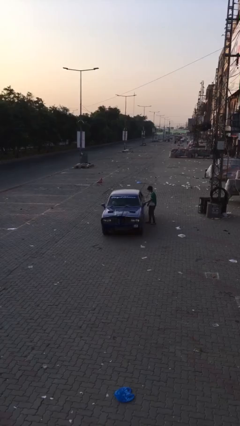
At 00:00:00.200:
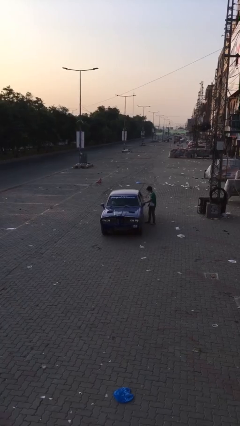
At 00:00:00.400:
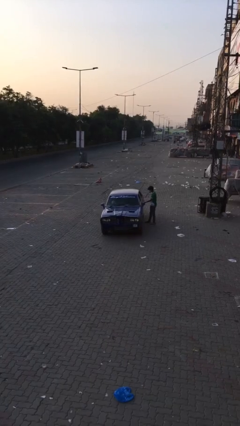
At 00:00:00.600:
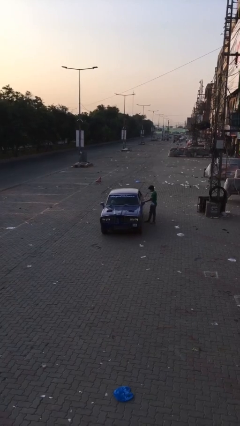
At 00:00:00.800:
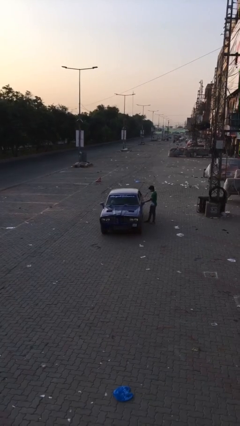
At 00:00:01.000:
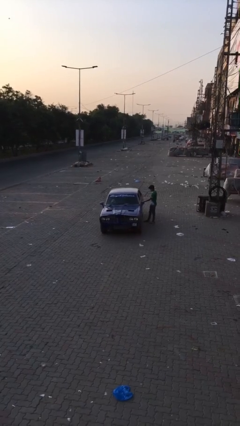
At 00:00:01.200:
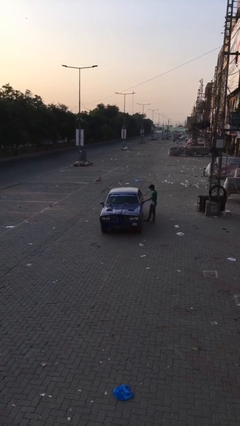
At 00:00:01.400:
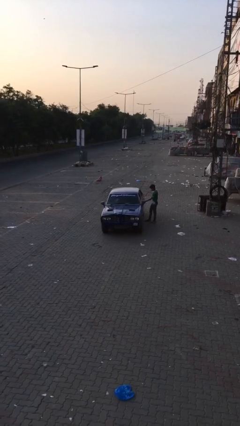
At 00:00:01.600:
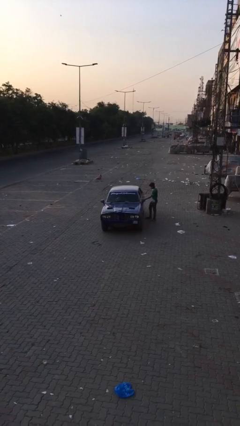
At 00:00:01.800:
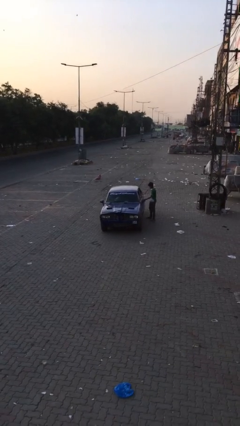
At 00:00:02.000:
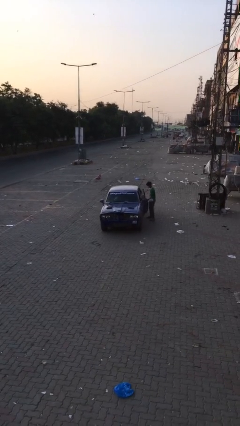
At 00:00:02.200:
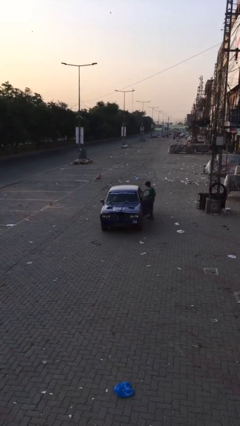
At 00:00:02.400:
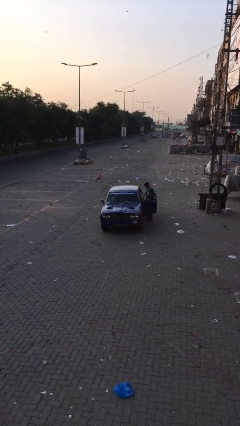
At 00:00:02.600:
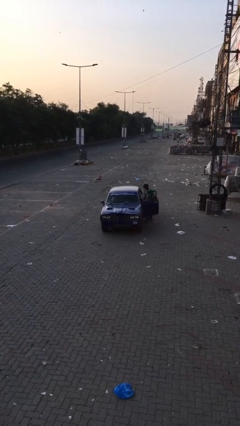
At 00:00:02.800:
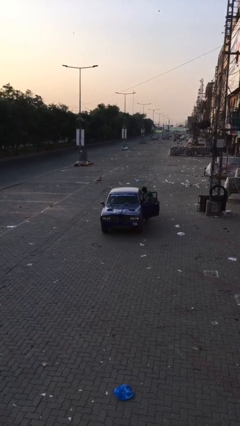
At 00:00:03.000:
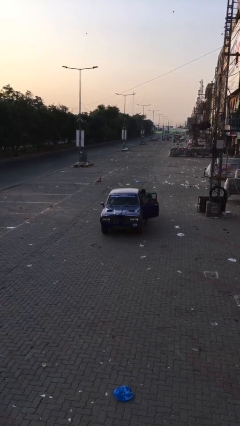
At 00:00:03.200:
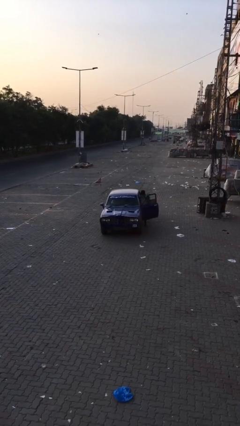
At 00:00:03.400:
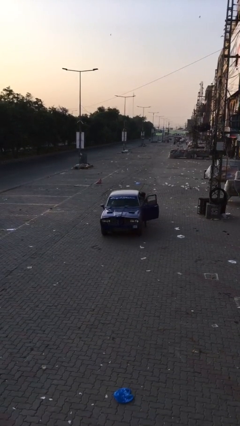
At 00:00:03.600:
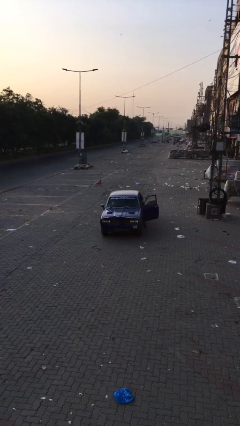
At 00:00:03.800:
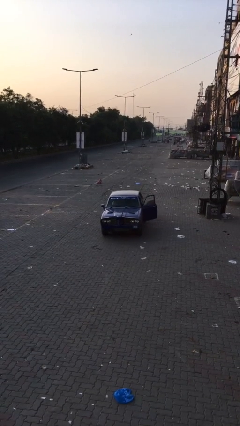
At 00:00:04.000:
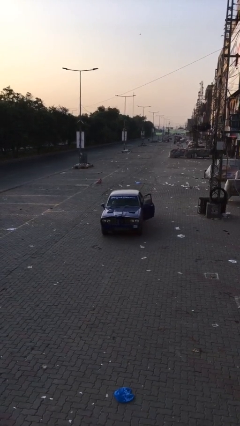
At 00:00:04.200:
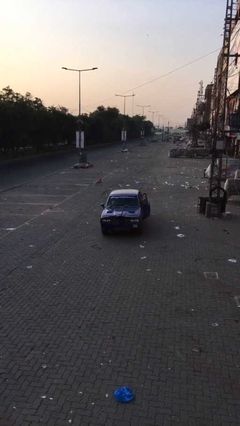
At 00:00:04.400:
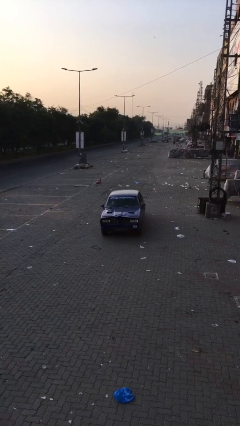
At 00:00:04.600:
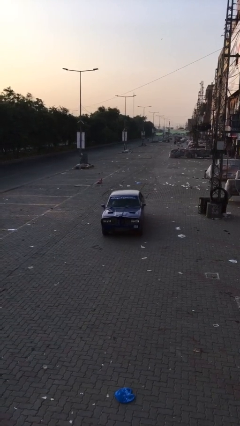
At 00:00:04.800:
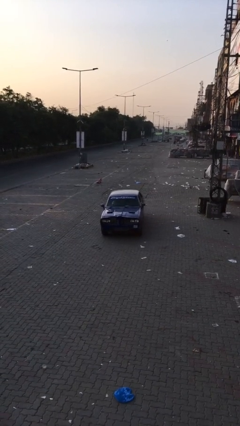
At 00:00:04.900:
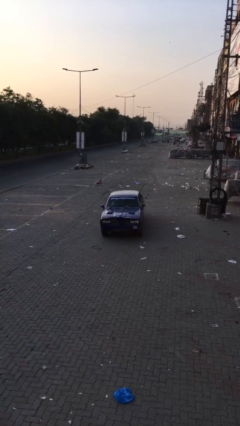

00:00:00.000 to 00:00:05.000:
car picks up person

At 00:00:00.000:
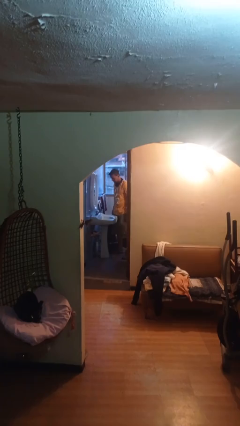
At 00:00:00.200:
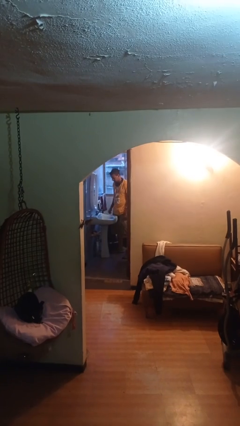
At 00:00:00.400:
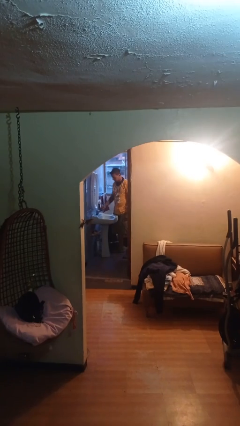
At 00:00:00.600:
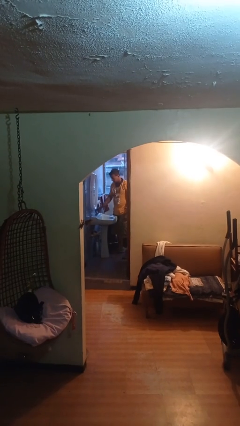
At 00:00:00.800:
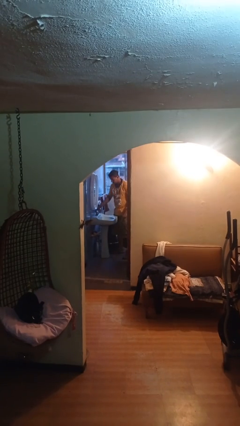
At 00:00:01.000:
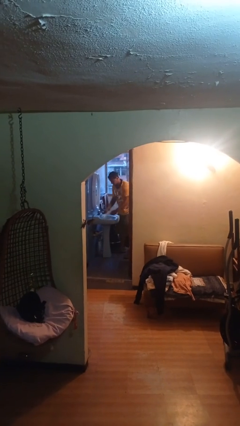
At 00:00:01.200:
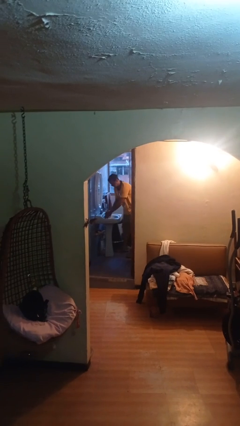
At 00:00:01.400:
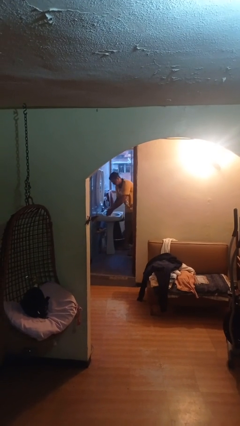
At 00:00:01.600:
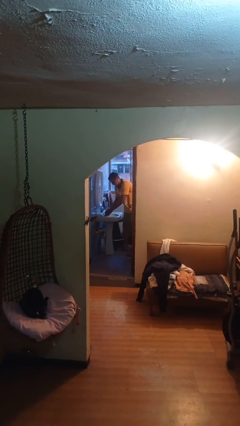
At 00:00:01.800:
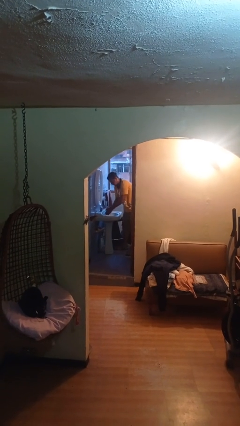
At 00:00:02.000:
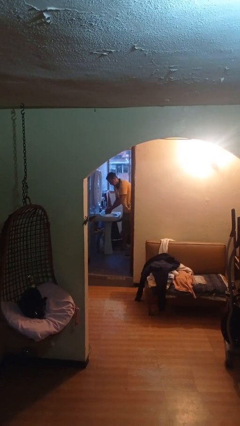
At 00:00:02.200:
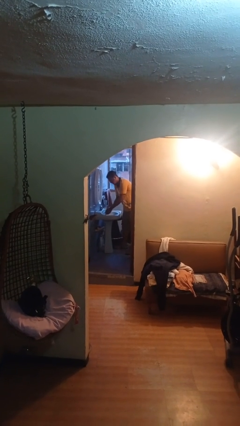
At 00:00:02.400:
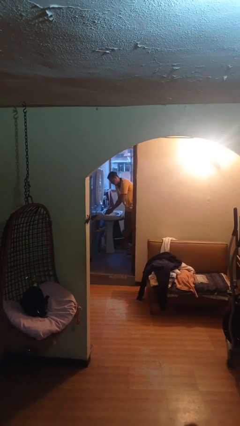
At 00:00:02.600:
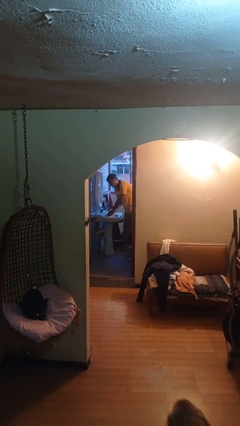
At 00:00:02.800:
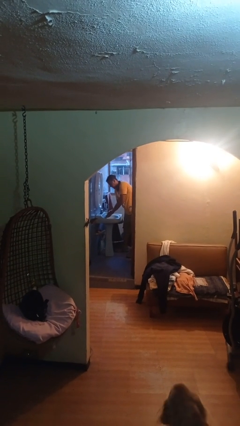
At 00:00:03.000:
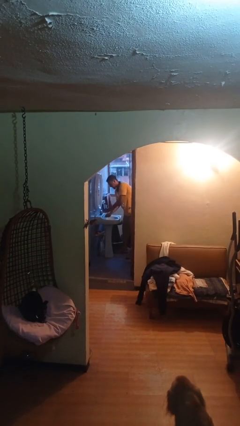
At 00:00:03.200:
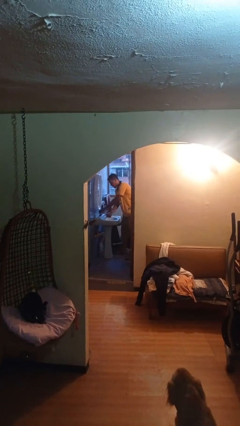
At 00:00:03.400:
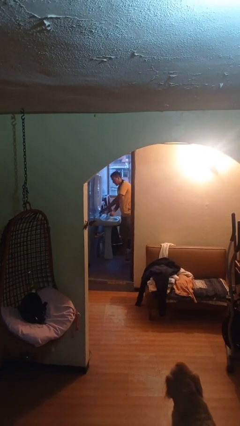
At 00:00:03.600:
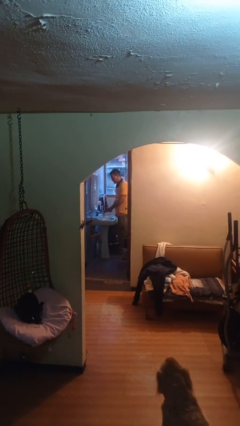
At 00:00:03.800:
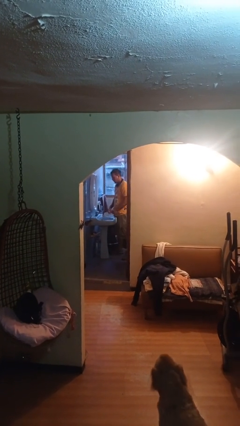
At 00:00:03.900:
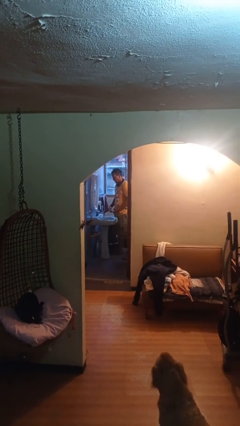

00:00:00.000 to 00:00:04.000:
person washes hands

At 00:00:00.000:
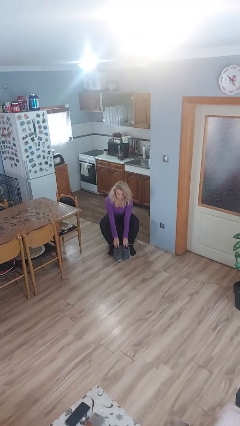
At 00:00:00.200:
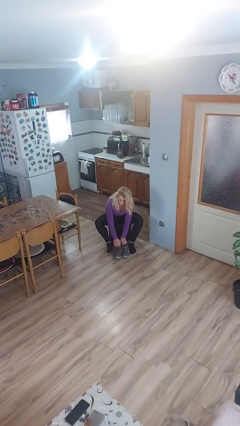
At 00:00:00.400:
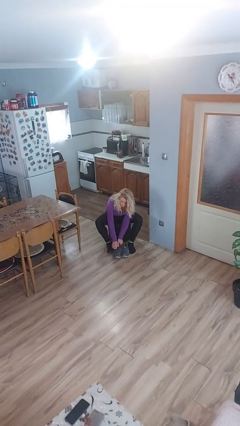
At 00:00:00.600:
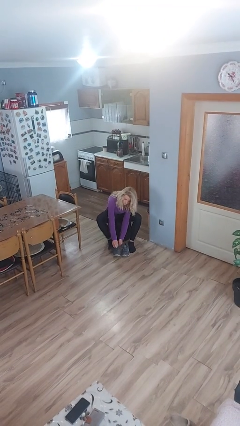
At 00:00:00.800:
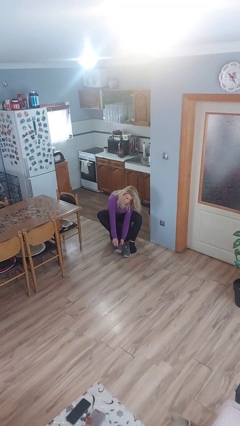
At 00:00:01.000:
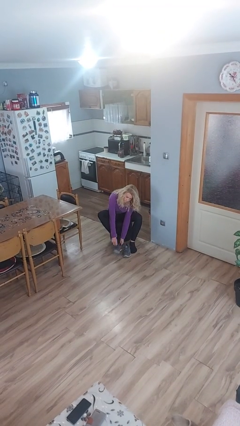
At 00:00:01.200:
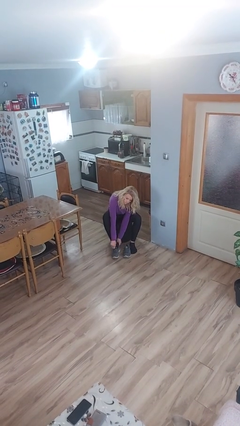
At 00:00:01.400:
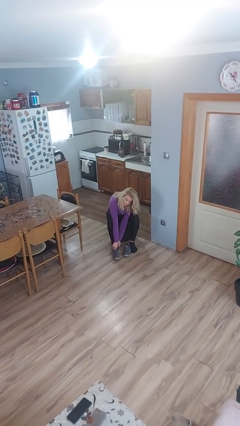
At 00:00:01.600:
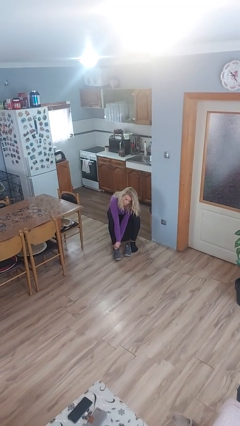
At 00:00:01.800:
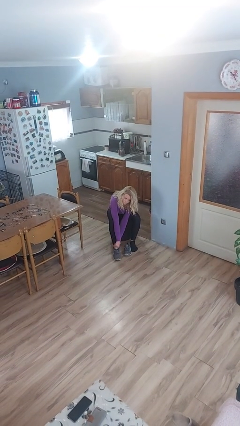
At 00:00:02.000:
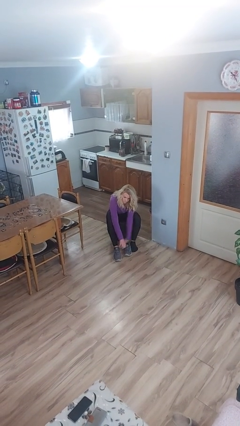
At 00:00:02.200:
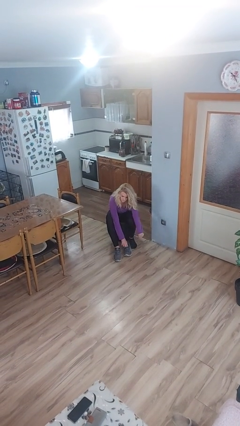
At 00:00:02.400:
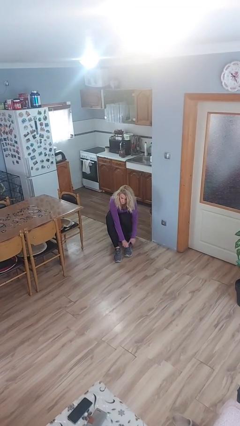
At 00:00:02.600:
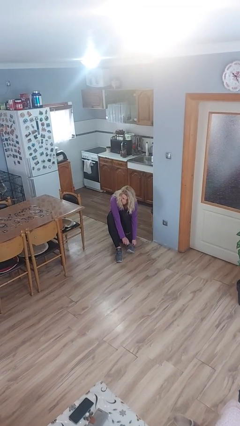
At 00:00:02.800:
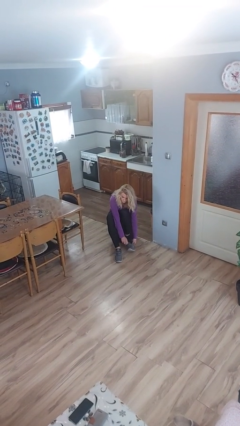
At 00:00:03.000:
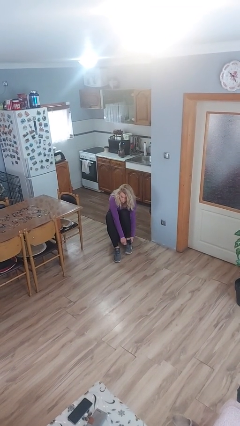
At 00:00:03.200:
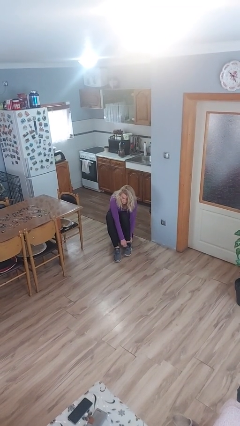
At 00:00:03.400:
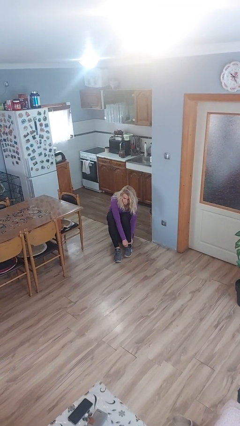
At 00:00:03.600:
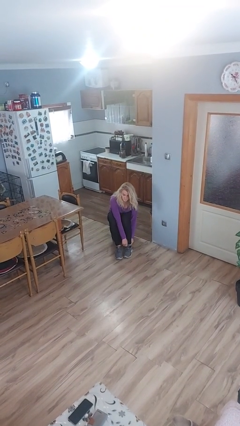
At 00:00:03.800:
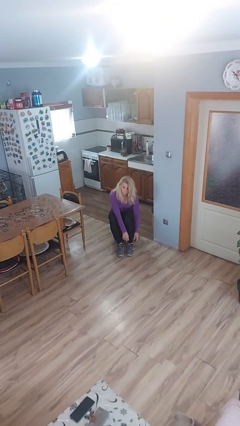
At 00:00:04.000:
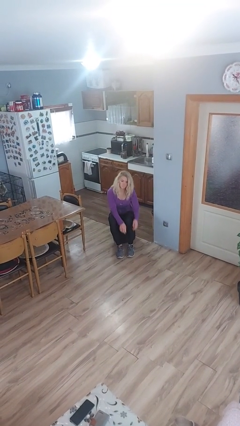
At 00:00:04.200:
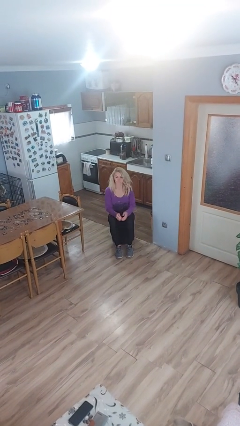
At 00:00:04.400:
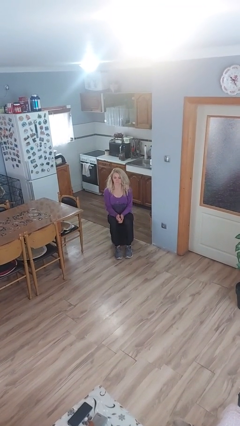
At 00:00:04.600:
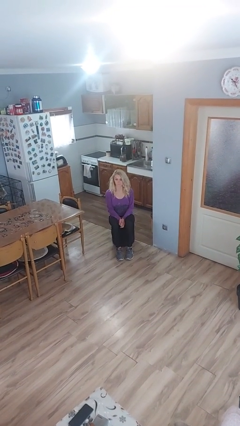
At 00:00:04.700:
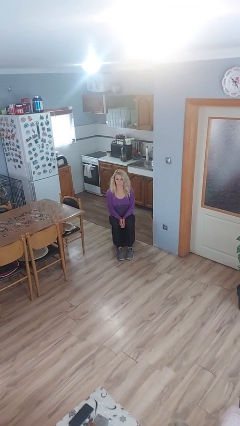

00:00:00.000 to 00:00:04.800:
person puts on shoes

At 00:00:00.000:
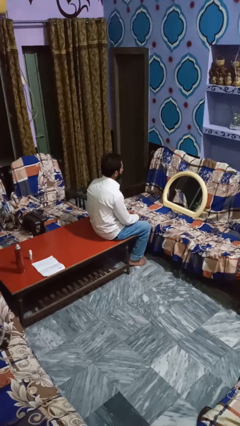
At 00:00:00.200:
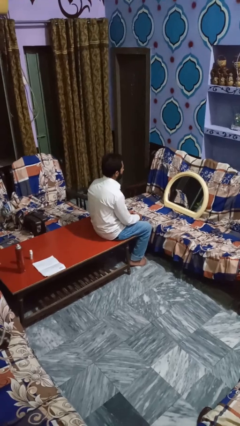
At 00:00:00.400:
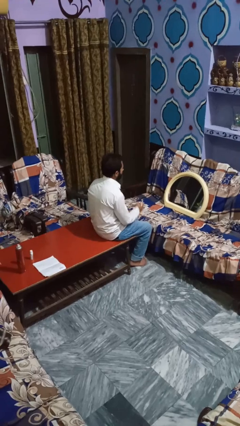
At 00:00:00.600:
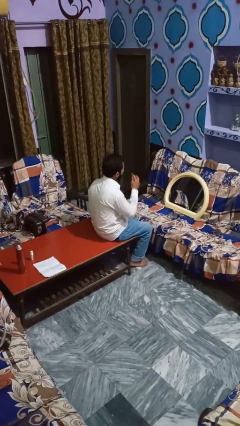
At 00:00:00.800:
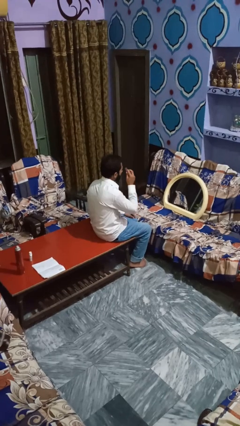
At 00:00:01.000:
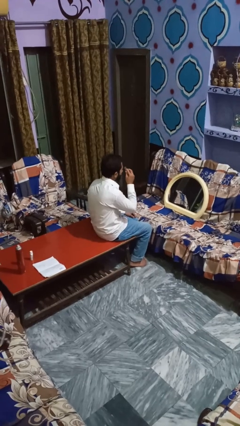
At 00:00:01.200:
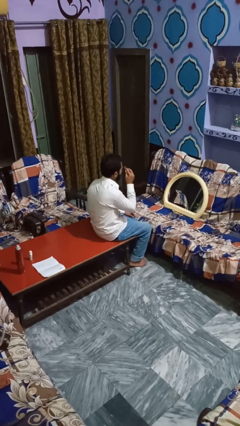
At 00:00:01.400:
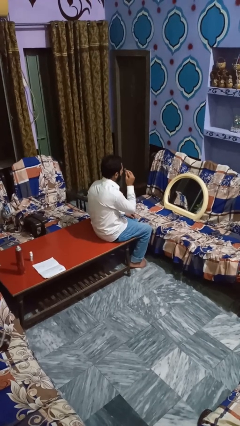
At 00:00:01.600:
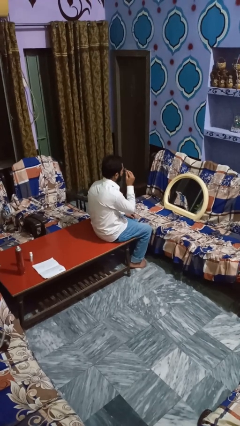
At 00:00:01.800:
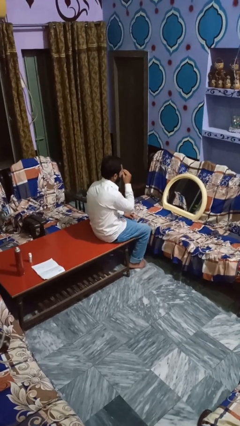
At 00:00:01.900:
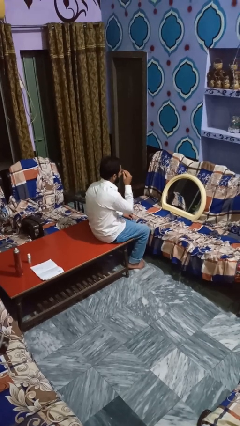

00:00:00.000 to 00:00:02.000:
person applies eye makeup

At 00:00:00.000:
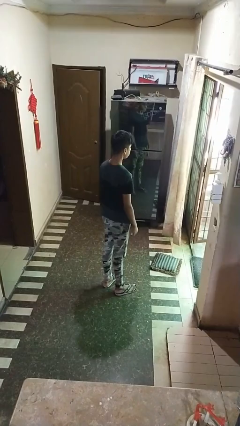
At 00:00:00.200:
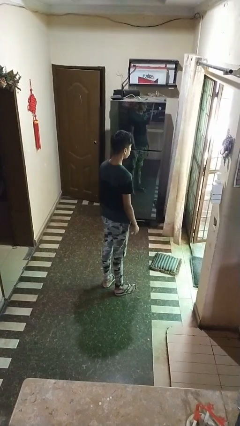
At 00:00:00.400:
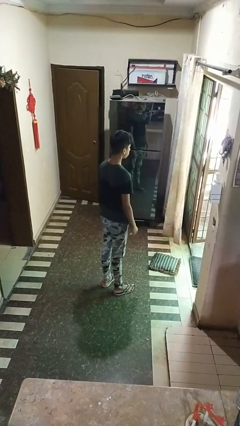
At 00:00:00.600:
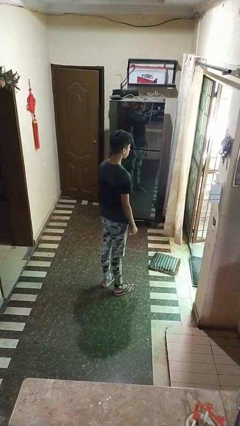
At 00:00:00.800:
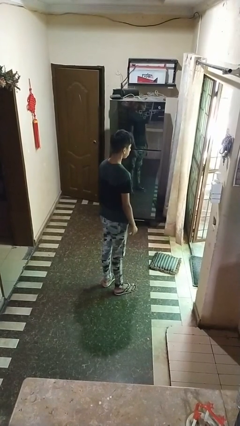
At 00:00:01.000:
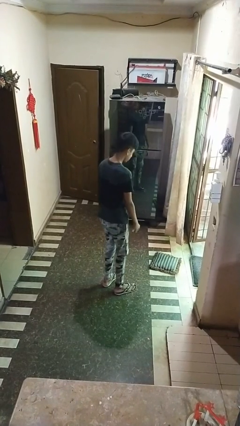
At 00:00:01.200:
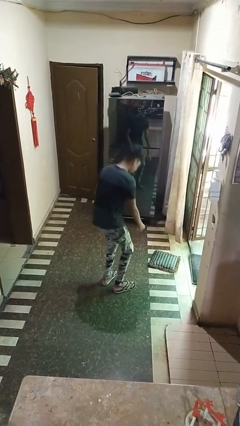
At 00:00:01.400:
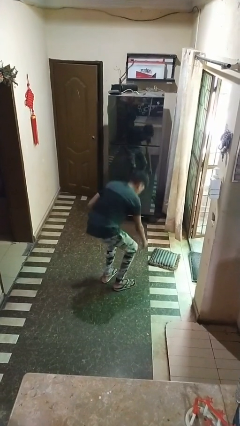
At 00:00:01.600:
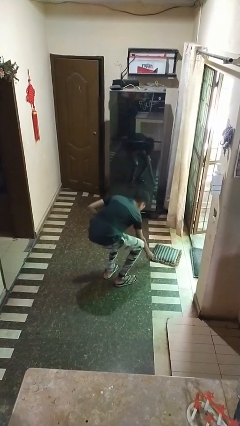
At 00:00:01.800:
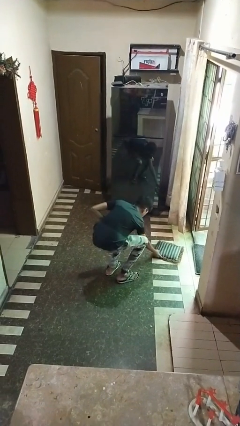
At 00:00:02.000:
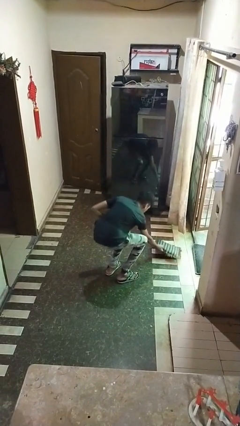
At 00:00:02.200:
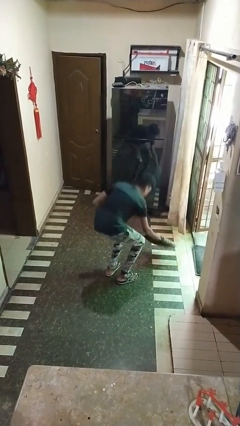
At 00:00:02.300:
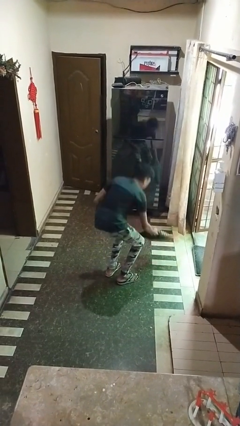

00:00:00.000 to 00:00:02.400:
person picks up object from floor
